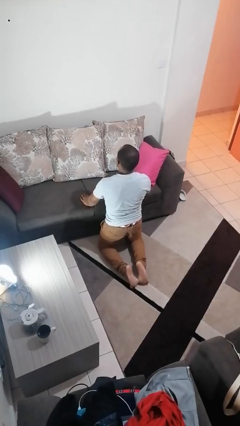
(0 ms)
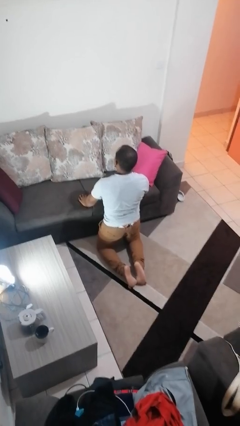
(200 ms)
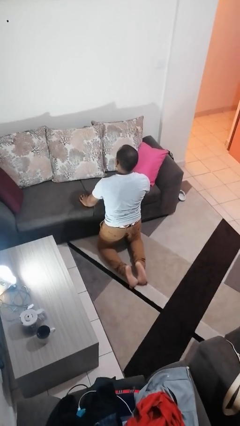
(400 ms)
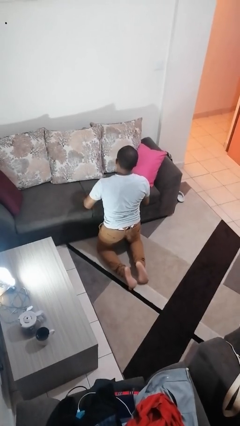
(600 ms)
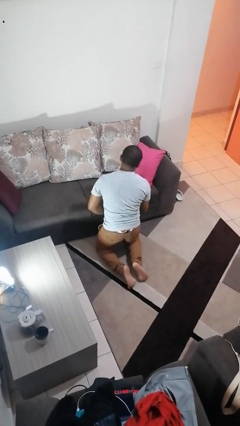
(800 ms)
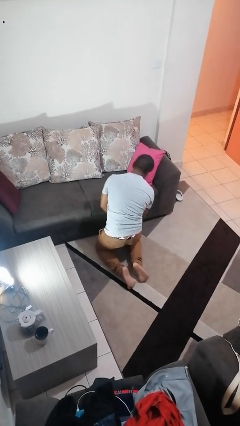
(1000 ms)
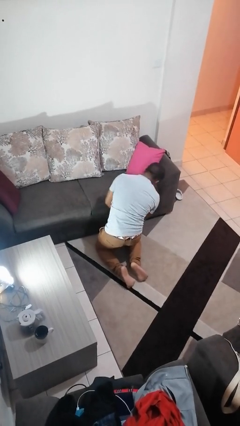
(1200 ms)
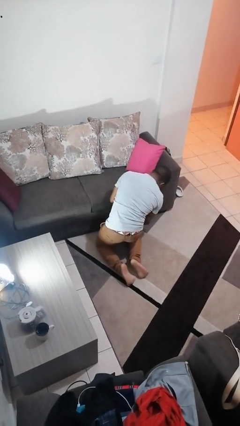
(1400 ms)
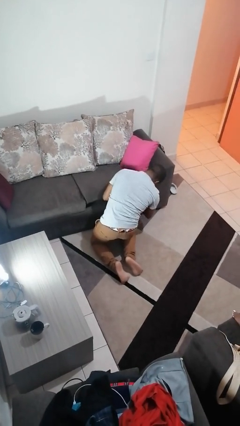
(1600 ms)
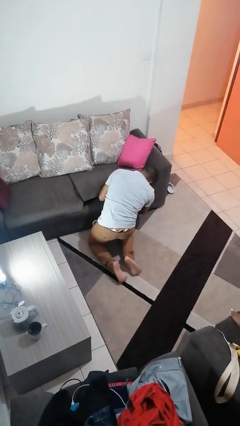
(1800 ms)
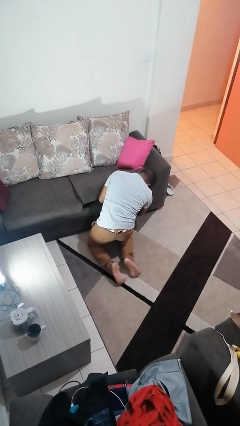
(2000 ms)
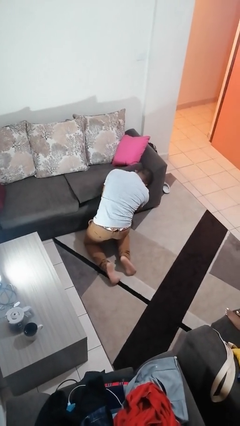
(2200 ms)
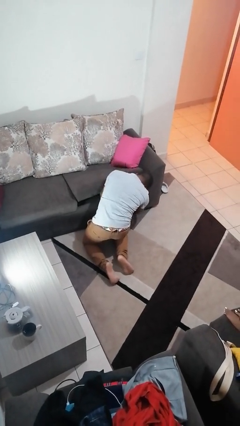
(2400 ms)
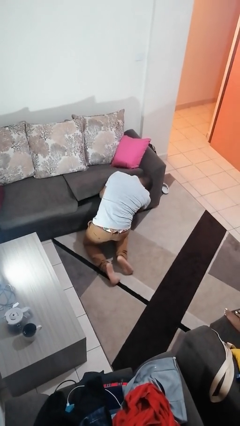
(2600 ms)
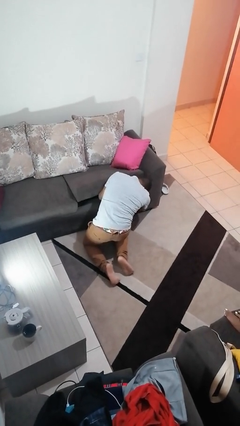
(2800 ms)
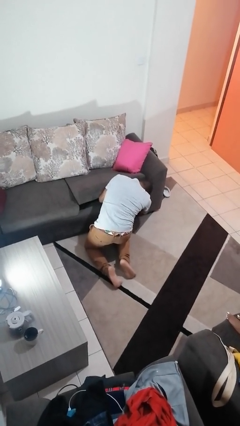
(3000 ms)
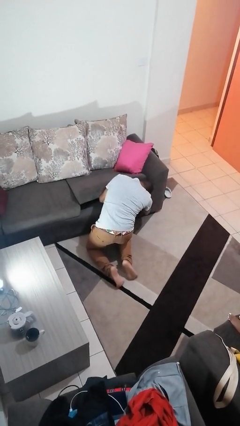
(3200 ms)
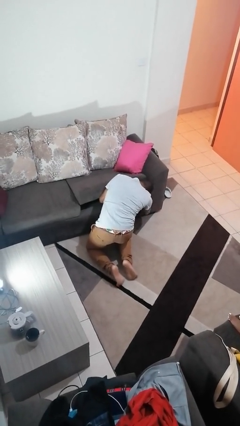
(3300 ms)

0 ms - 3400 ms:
person searches under couch

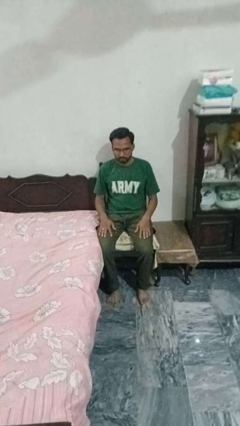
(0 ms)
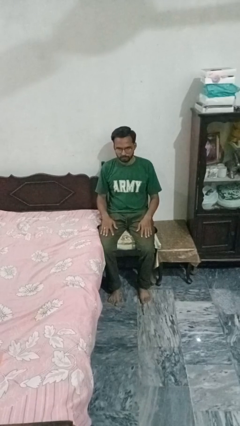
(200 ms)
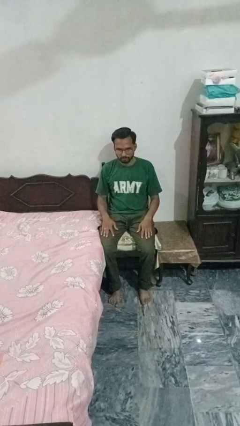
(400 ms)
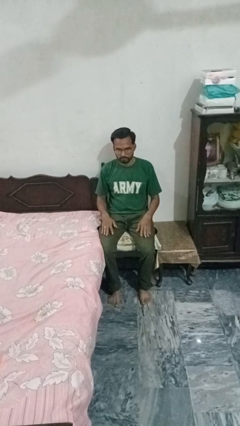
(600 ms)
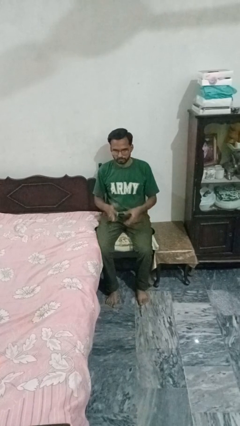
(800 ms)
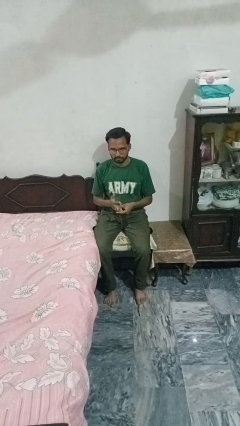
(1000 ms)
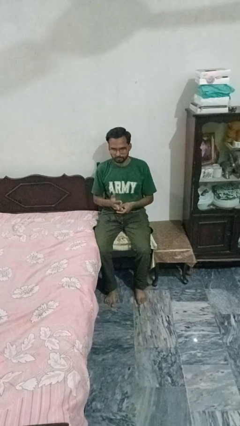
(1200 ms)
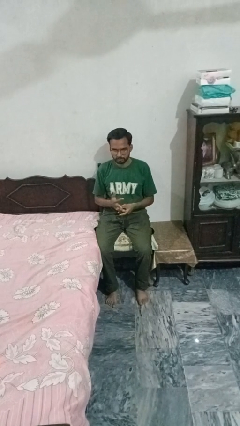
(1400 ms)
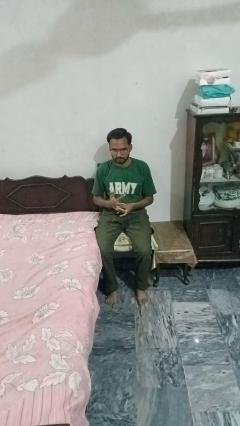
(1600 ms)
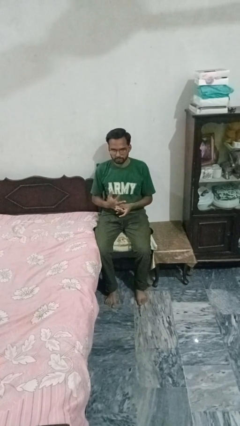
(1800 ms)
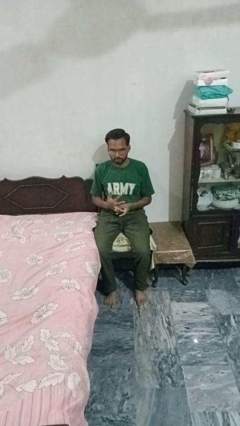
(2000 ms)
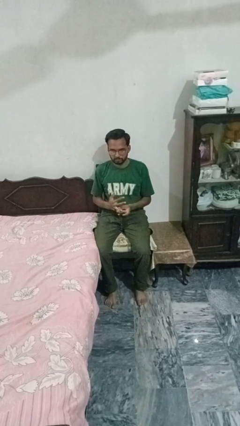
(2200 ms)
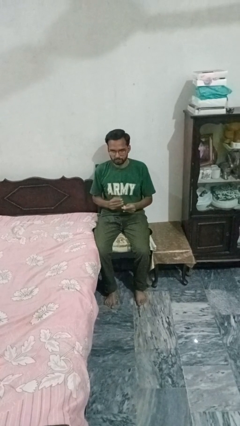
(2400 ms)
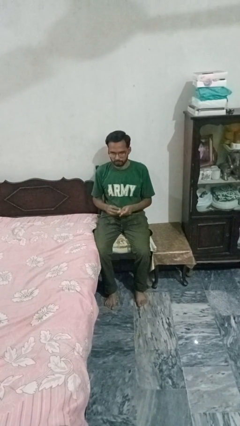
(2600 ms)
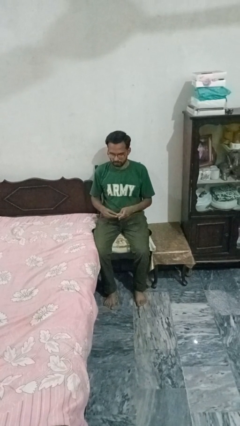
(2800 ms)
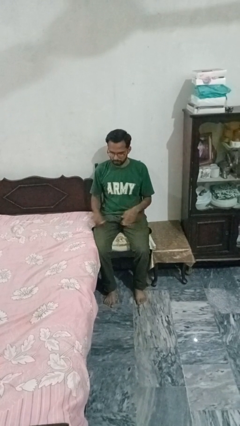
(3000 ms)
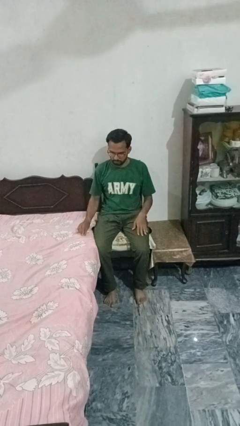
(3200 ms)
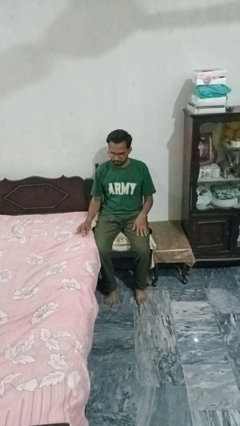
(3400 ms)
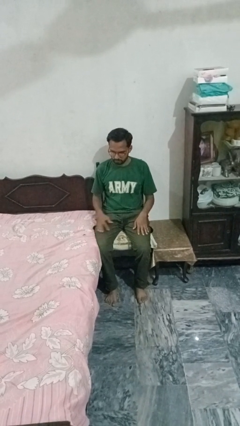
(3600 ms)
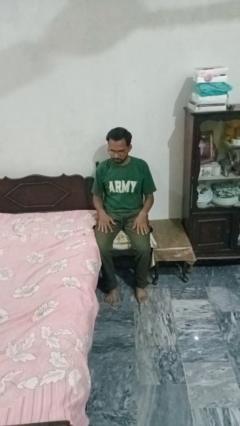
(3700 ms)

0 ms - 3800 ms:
person takes off ring

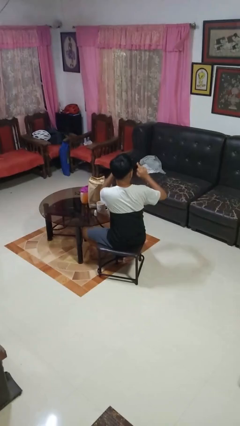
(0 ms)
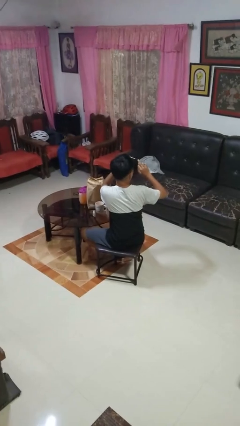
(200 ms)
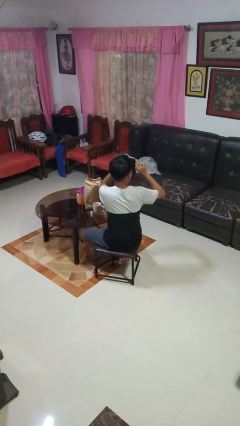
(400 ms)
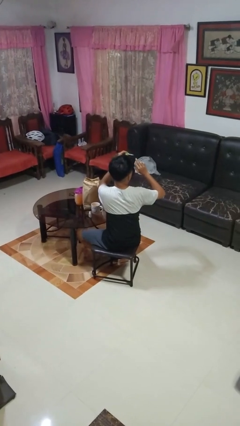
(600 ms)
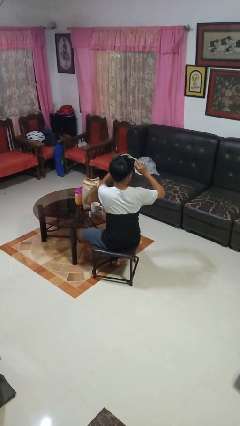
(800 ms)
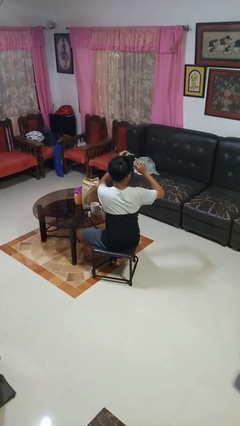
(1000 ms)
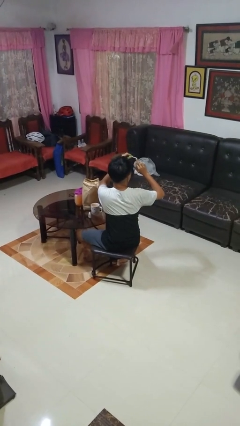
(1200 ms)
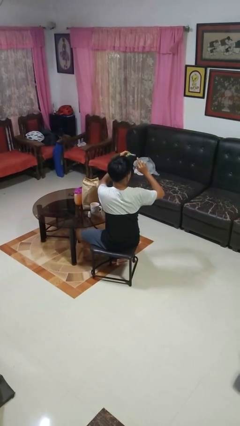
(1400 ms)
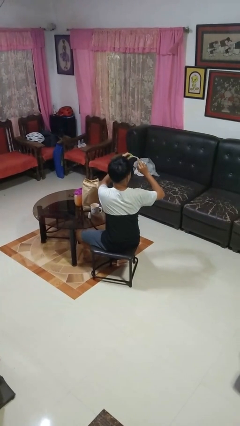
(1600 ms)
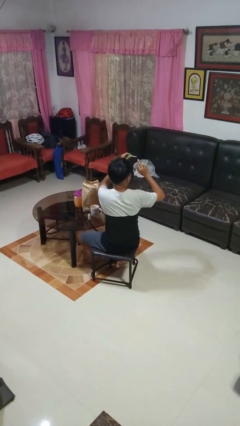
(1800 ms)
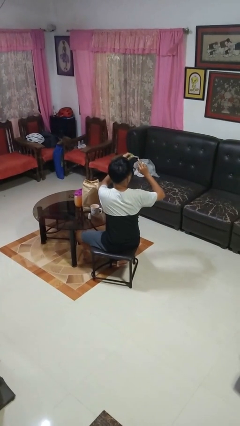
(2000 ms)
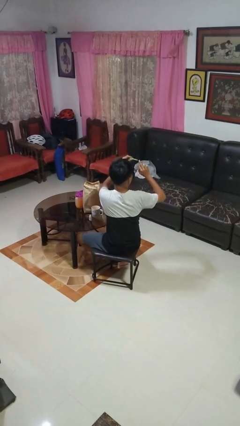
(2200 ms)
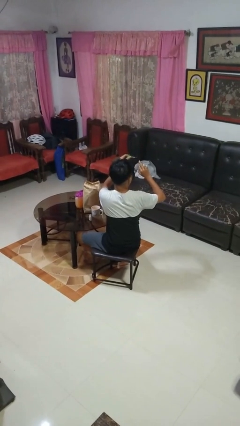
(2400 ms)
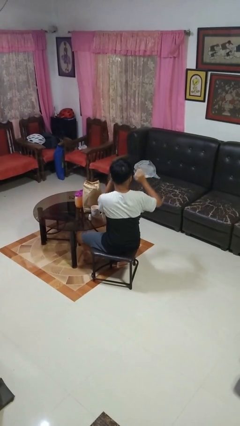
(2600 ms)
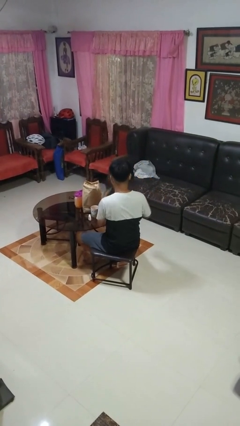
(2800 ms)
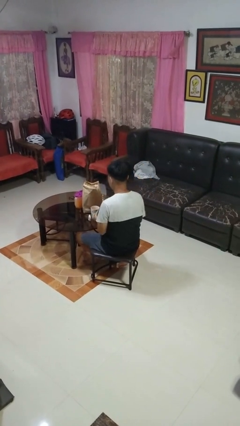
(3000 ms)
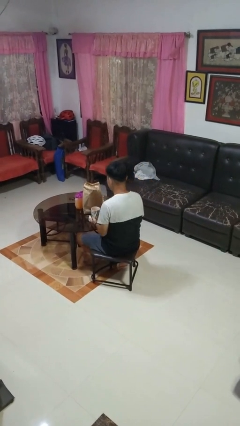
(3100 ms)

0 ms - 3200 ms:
person paints fingernails

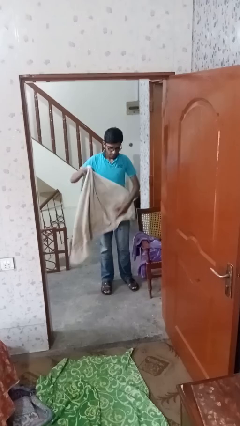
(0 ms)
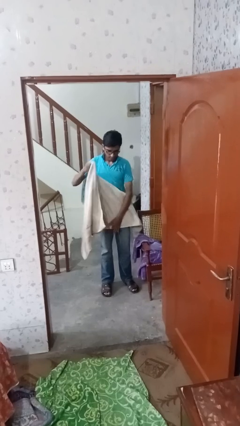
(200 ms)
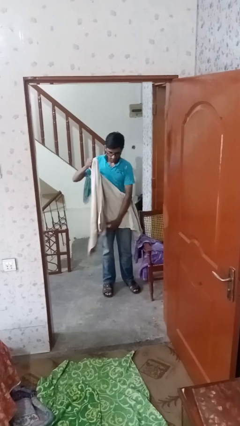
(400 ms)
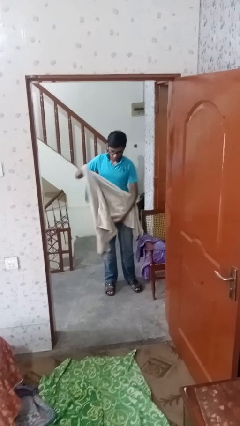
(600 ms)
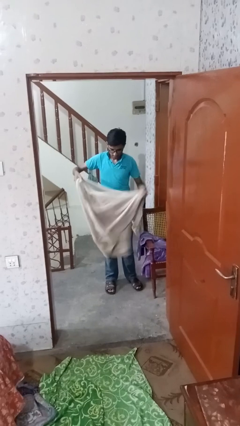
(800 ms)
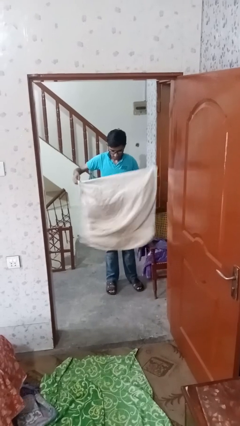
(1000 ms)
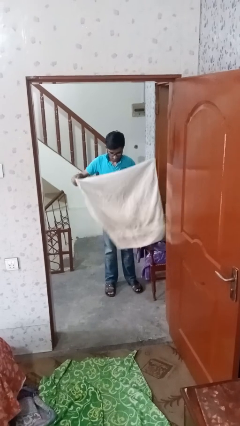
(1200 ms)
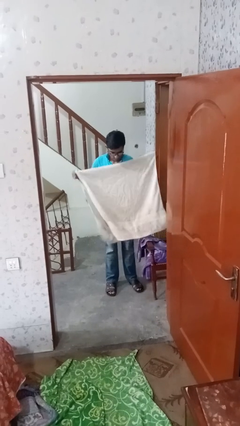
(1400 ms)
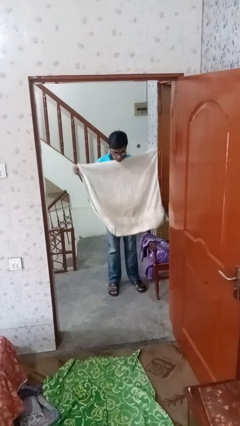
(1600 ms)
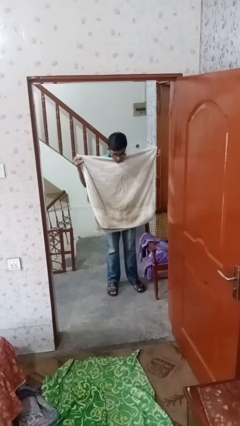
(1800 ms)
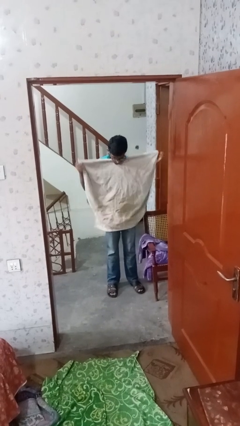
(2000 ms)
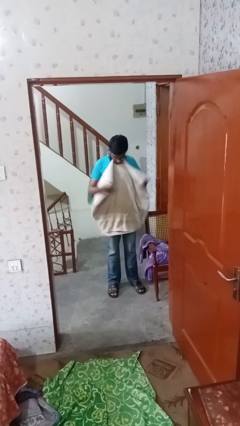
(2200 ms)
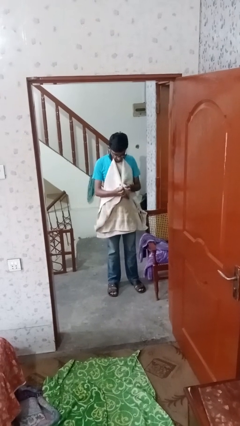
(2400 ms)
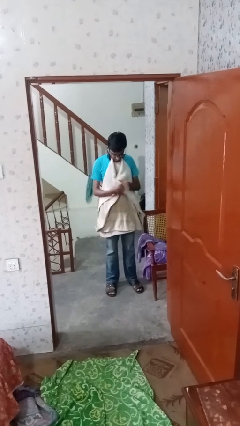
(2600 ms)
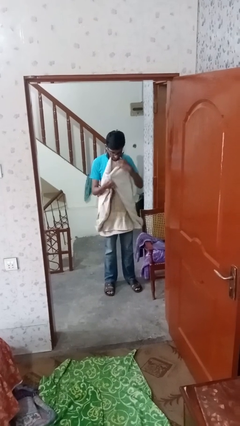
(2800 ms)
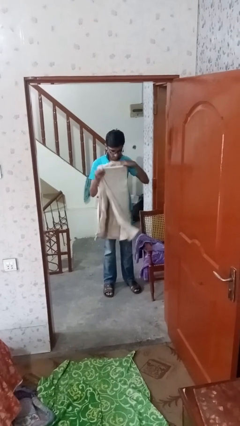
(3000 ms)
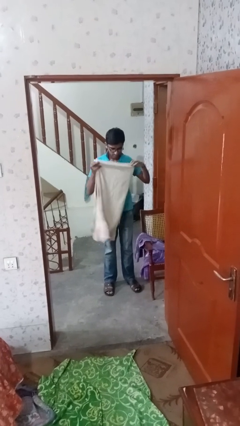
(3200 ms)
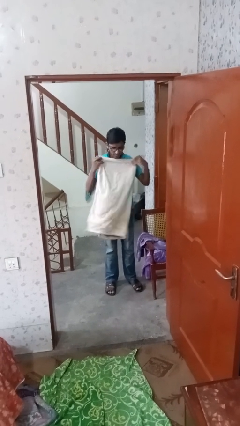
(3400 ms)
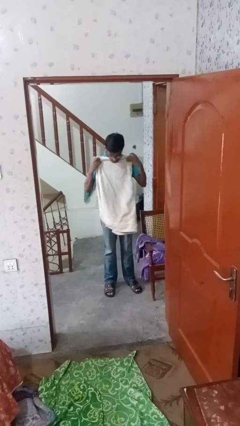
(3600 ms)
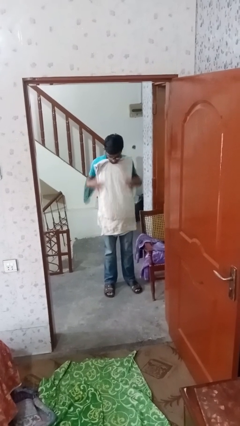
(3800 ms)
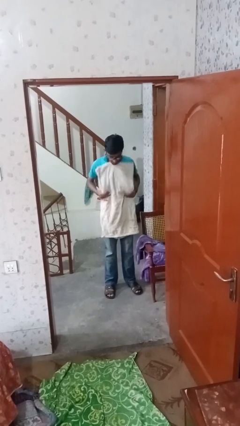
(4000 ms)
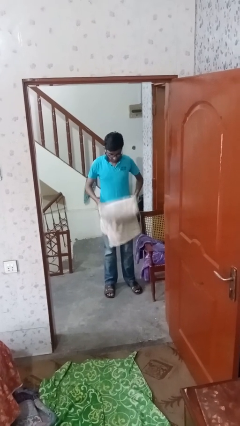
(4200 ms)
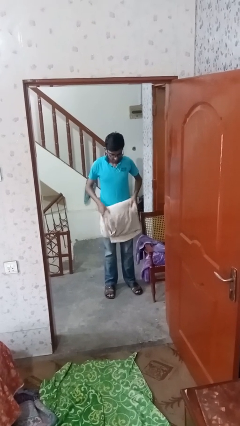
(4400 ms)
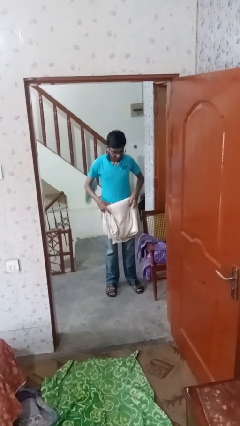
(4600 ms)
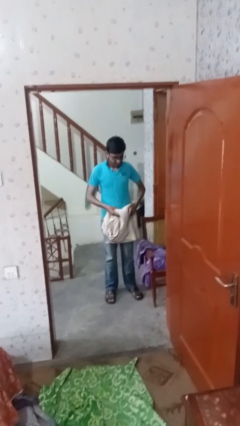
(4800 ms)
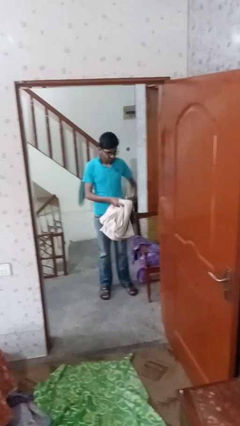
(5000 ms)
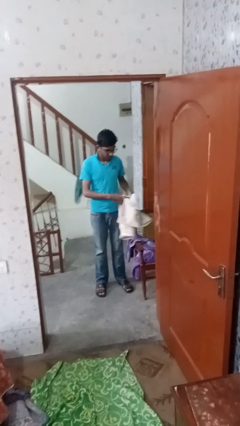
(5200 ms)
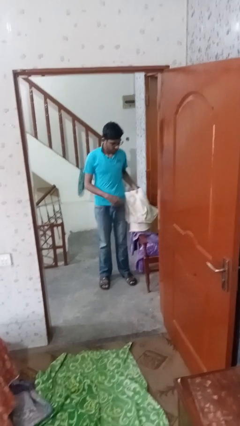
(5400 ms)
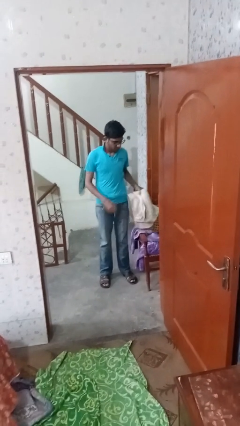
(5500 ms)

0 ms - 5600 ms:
person folds towel

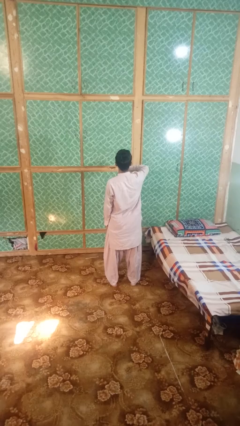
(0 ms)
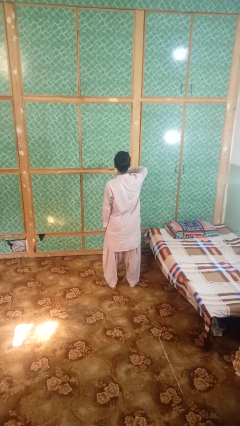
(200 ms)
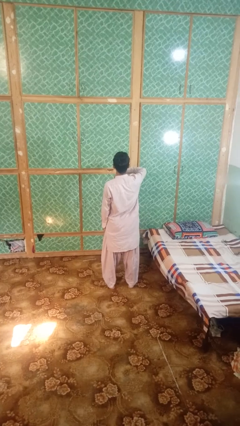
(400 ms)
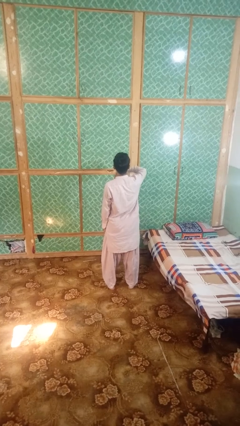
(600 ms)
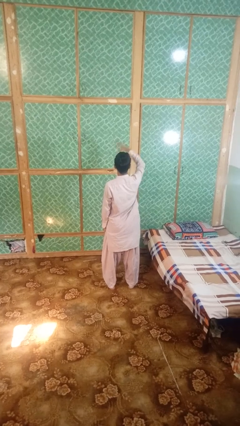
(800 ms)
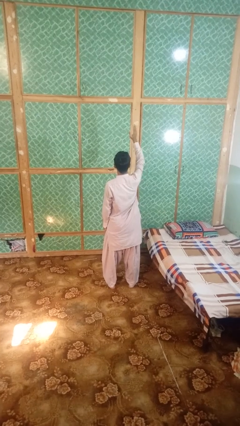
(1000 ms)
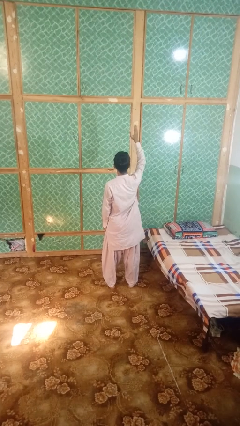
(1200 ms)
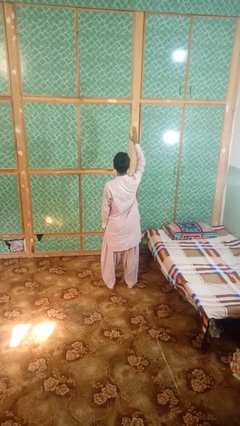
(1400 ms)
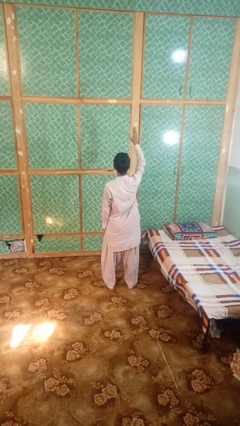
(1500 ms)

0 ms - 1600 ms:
person gestures swipe up
